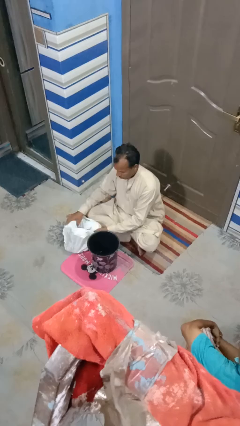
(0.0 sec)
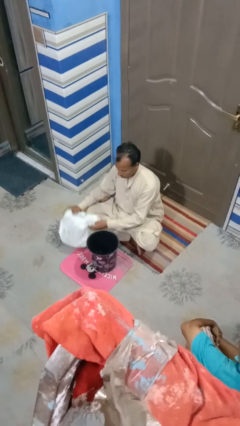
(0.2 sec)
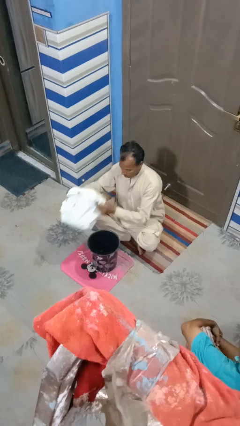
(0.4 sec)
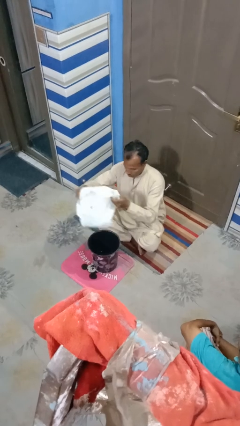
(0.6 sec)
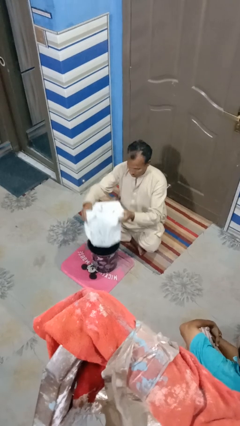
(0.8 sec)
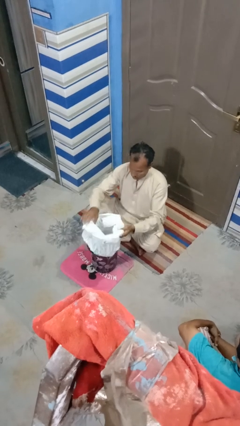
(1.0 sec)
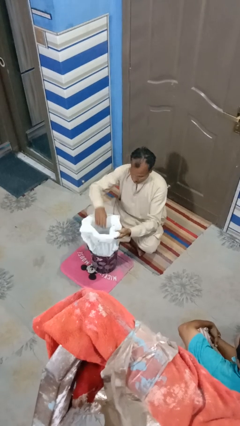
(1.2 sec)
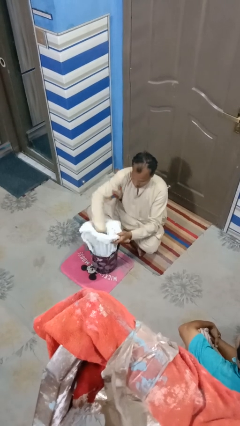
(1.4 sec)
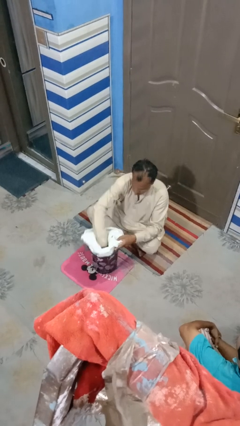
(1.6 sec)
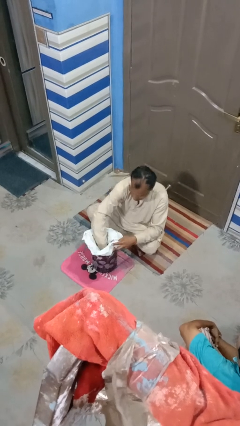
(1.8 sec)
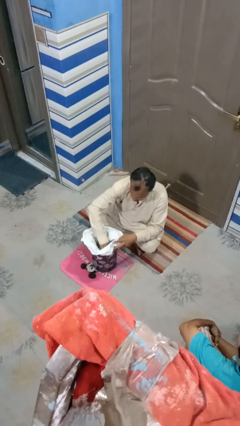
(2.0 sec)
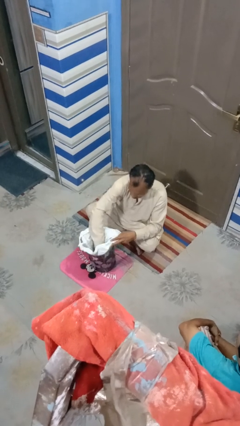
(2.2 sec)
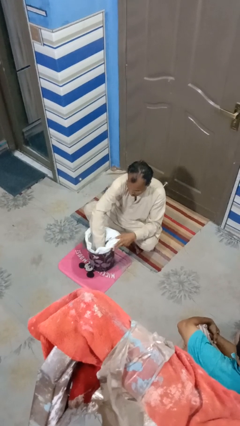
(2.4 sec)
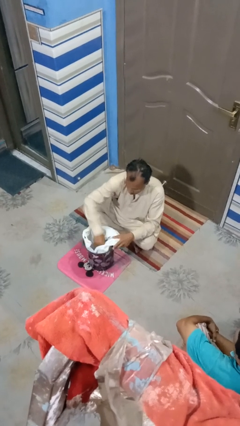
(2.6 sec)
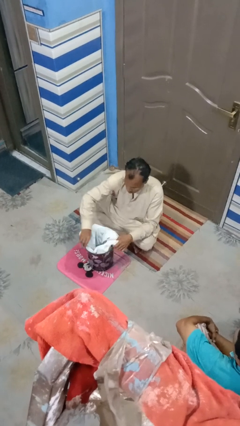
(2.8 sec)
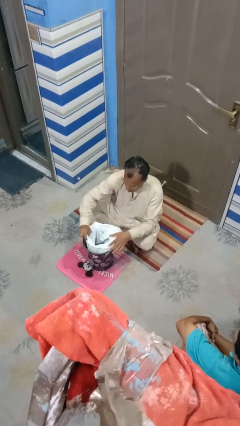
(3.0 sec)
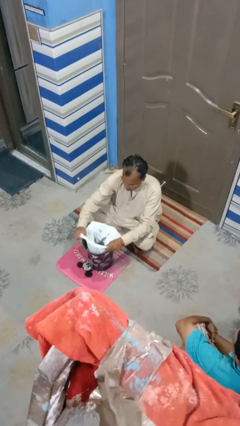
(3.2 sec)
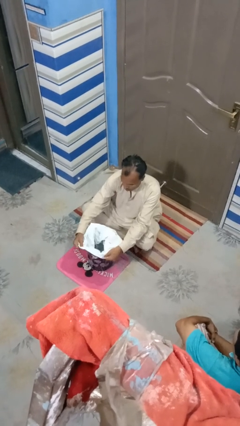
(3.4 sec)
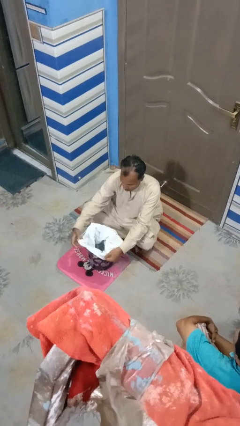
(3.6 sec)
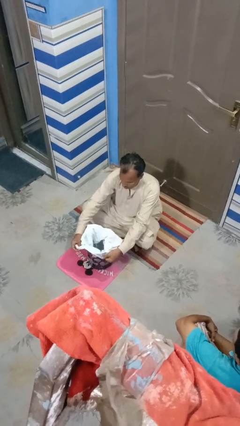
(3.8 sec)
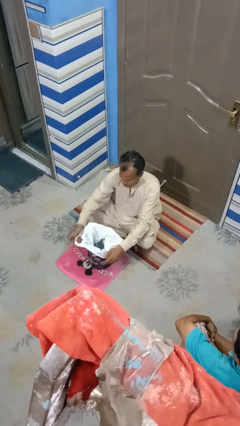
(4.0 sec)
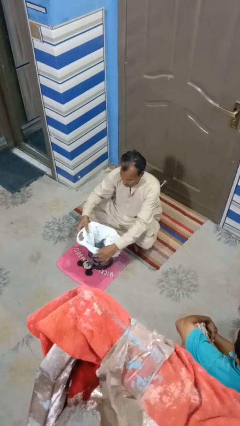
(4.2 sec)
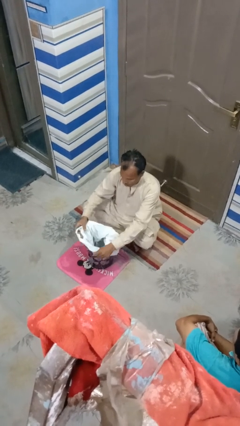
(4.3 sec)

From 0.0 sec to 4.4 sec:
person removes trashbag from trashcan

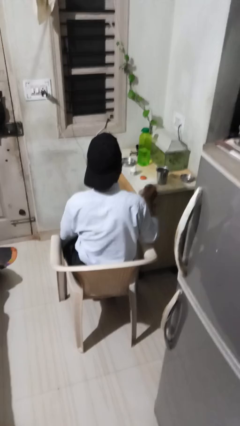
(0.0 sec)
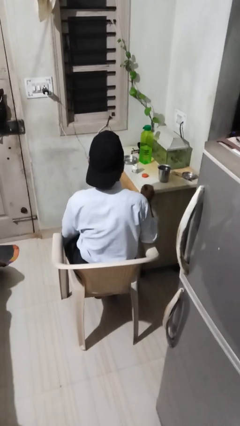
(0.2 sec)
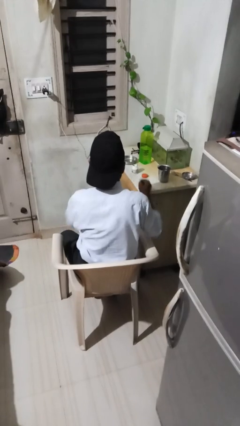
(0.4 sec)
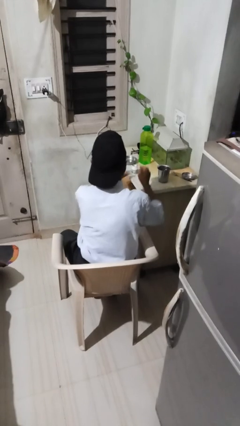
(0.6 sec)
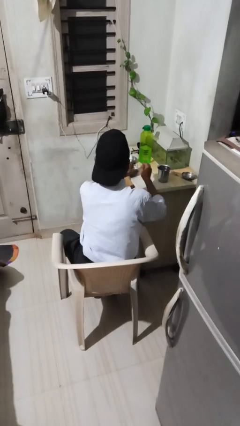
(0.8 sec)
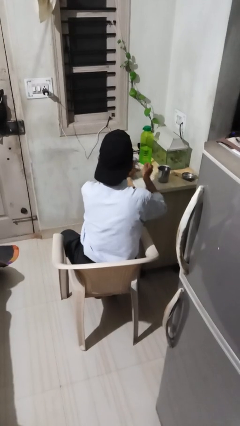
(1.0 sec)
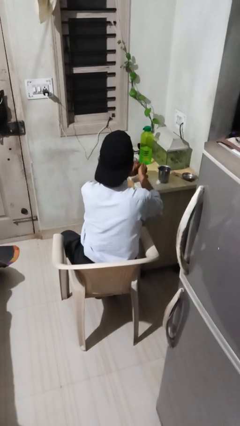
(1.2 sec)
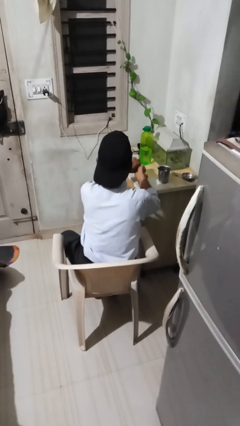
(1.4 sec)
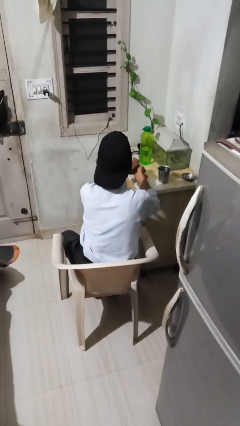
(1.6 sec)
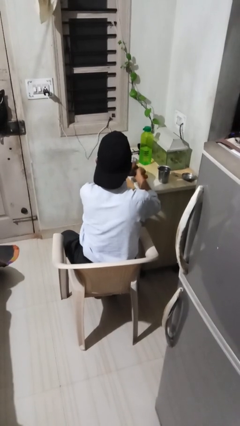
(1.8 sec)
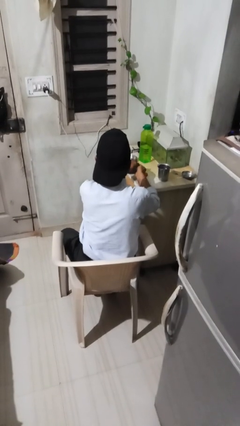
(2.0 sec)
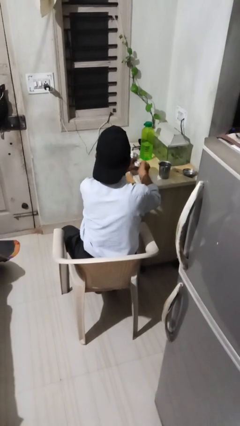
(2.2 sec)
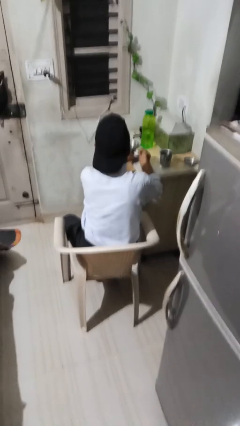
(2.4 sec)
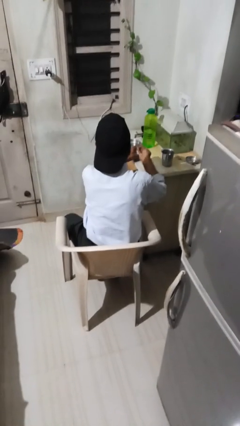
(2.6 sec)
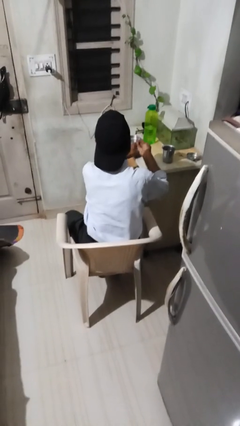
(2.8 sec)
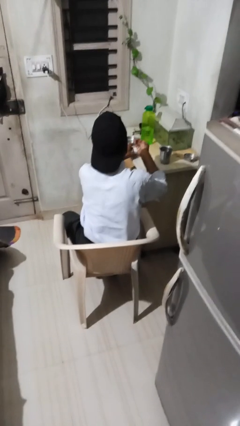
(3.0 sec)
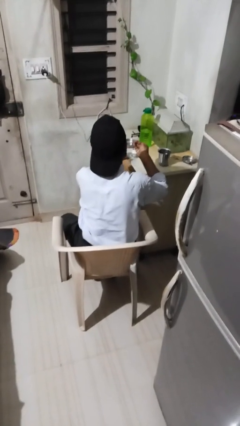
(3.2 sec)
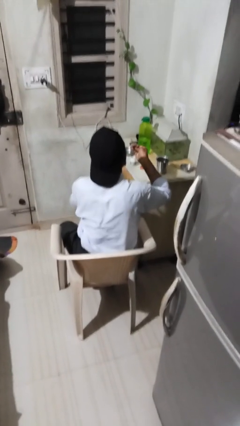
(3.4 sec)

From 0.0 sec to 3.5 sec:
person takes medicine pills

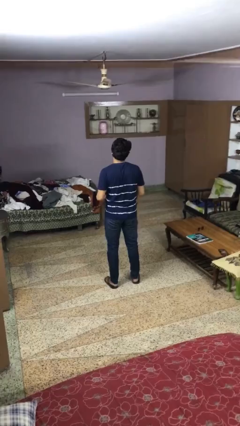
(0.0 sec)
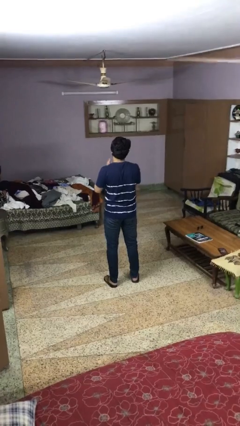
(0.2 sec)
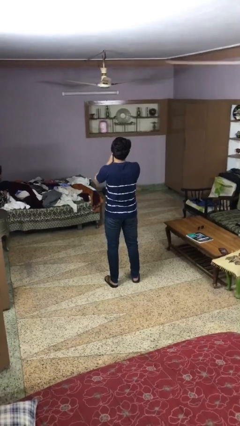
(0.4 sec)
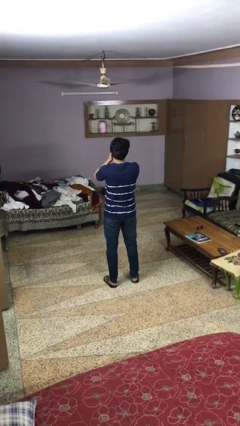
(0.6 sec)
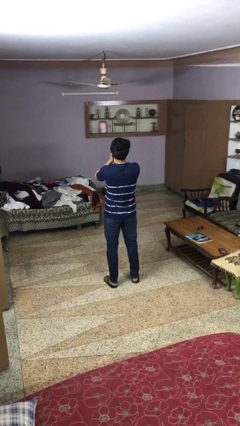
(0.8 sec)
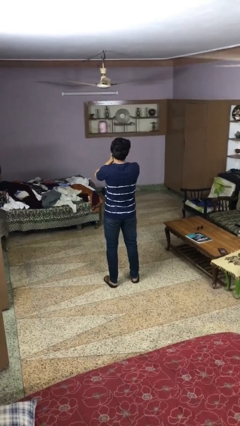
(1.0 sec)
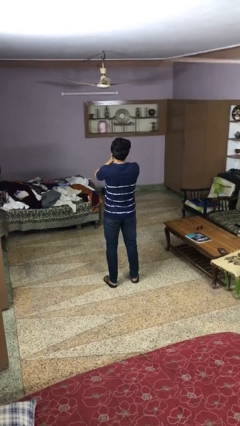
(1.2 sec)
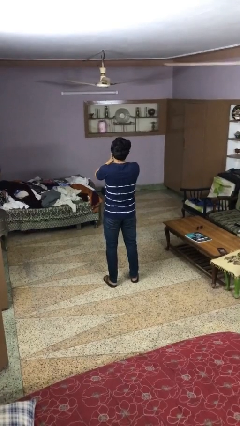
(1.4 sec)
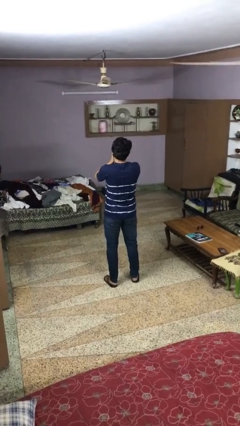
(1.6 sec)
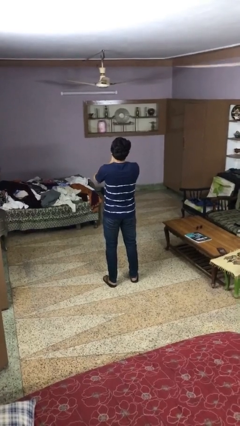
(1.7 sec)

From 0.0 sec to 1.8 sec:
person covers face with hands

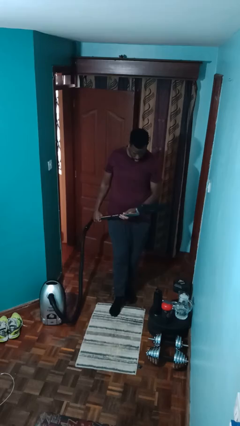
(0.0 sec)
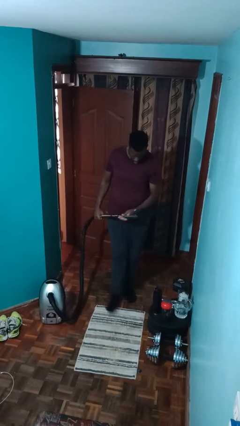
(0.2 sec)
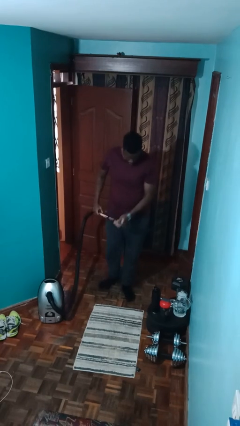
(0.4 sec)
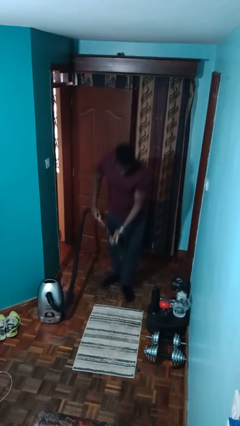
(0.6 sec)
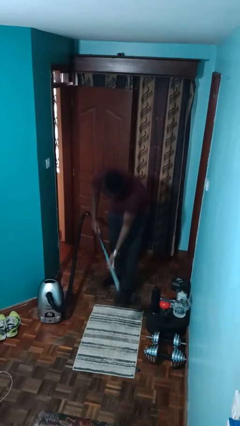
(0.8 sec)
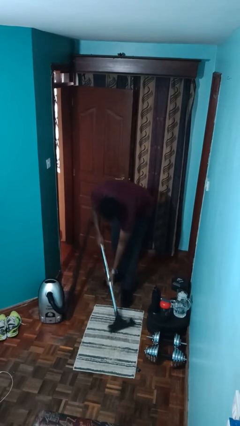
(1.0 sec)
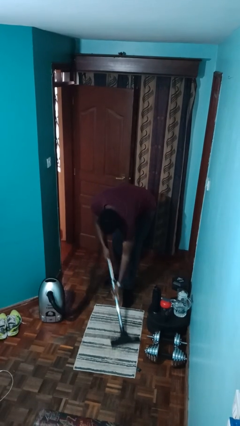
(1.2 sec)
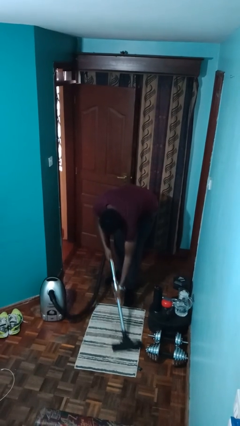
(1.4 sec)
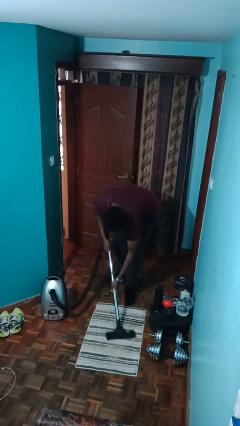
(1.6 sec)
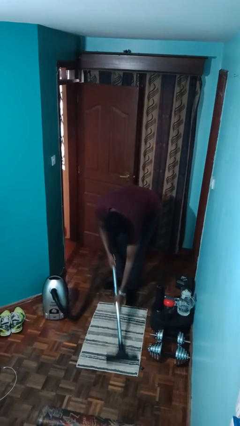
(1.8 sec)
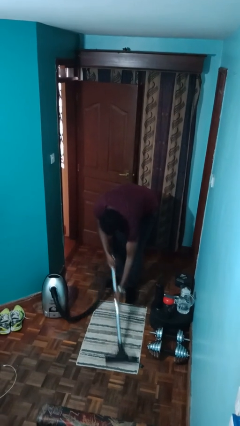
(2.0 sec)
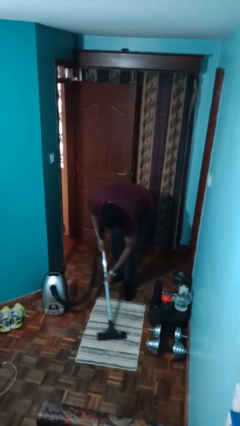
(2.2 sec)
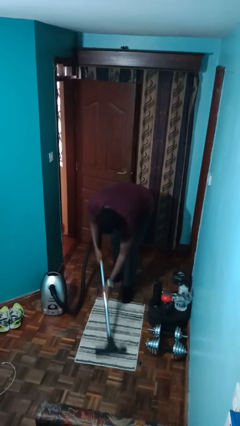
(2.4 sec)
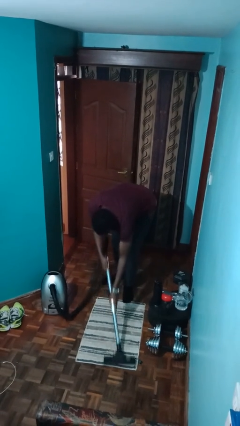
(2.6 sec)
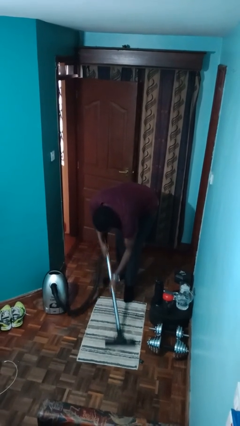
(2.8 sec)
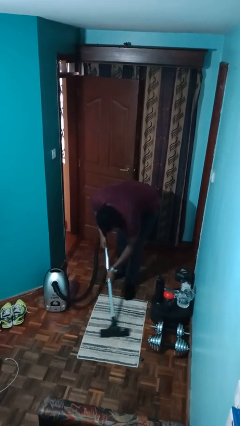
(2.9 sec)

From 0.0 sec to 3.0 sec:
person vacuums carpet

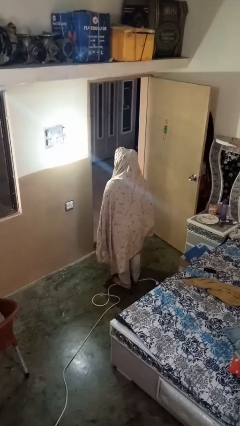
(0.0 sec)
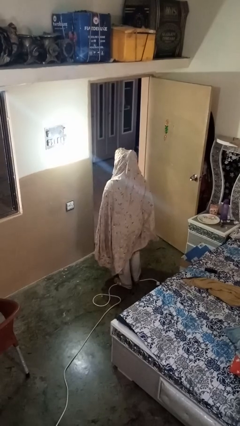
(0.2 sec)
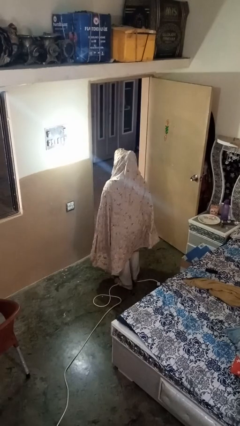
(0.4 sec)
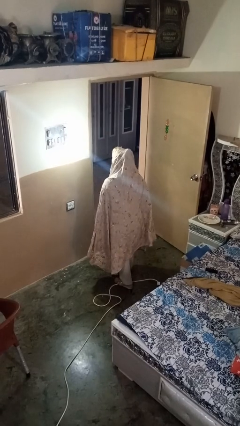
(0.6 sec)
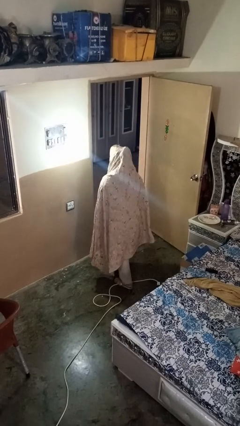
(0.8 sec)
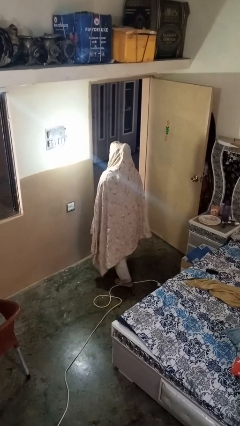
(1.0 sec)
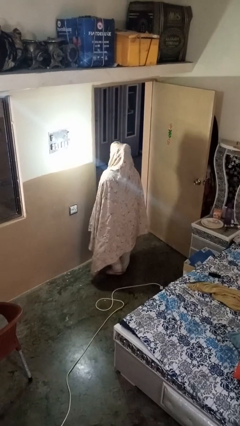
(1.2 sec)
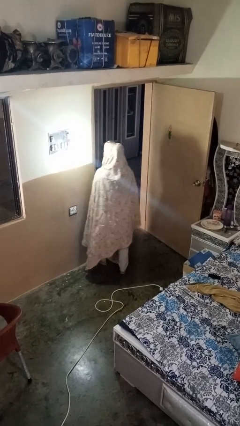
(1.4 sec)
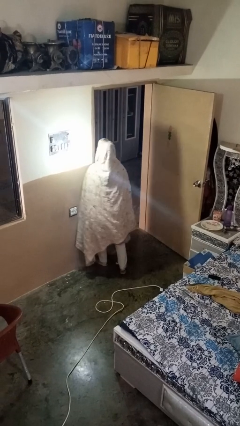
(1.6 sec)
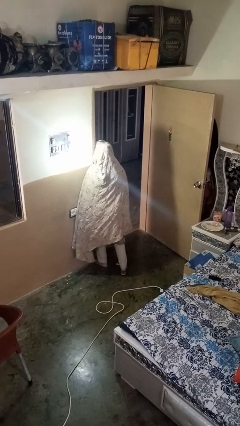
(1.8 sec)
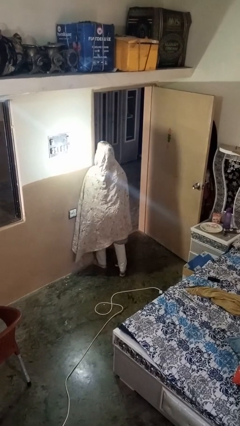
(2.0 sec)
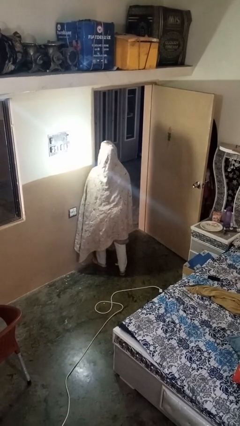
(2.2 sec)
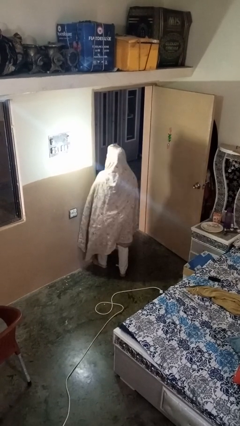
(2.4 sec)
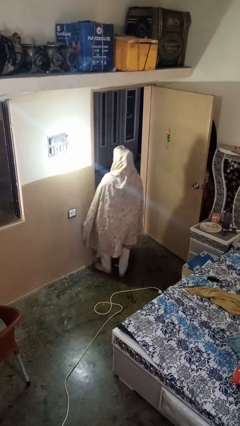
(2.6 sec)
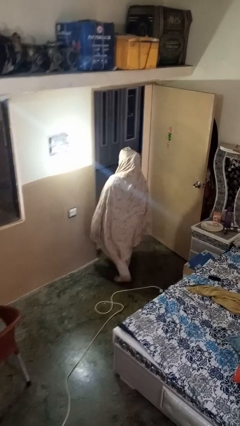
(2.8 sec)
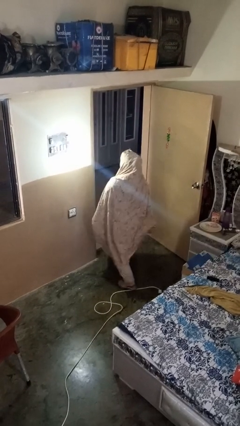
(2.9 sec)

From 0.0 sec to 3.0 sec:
person bumps into wall

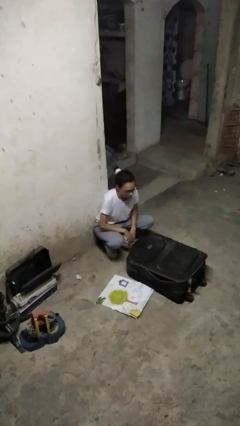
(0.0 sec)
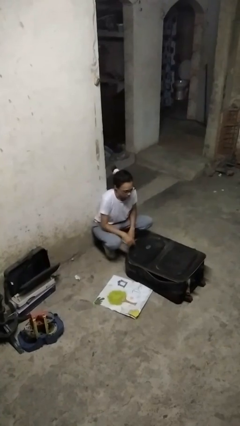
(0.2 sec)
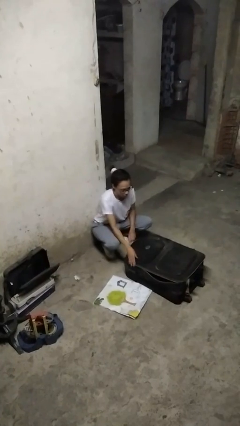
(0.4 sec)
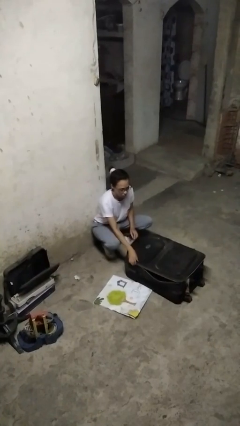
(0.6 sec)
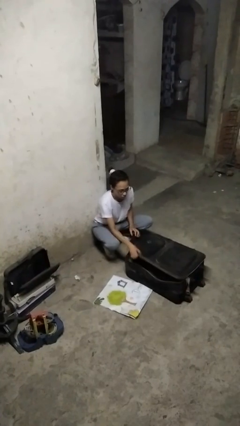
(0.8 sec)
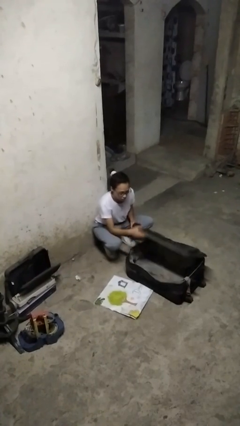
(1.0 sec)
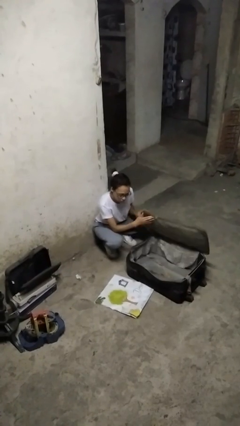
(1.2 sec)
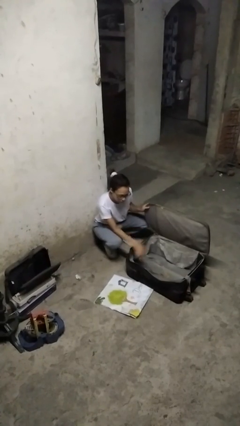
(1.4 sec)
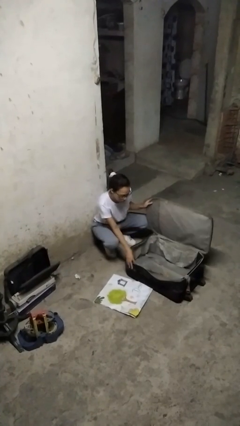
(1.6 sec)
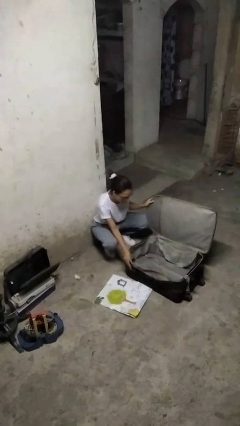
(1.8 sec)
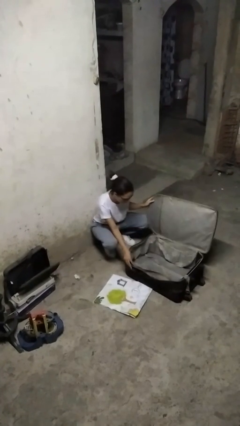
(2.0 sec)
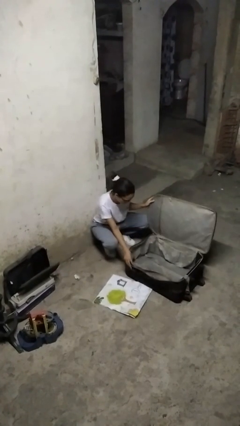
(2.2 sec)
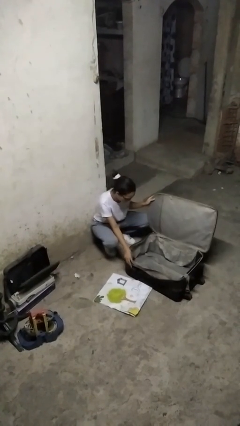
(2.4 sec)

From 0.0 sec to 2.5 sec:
person opens suitcase
